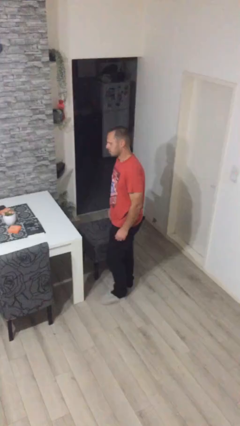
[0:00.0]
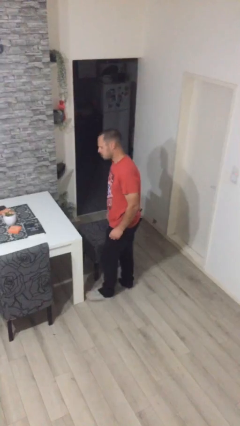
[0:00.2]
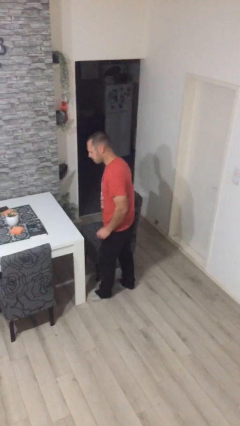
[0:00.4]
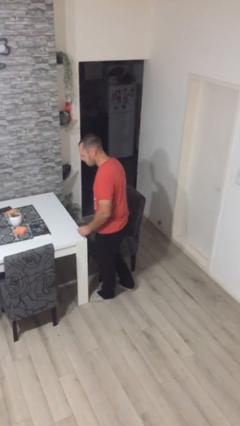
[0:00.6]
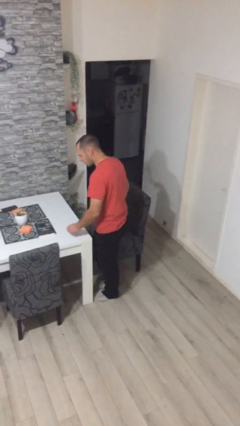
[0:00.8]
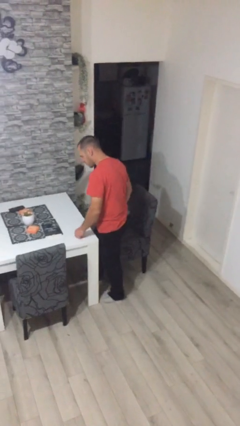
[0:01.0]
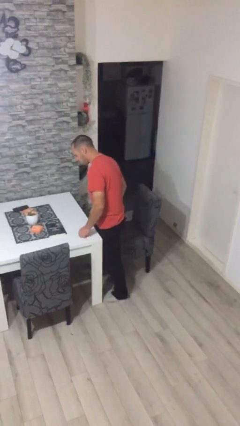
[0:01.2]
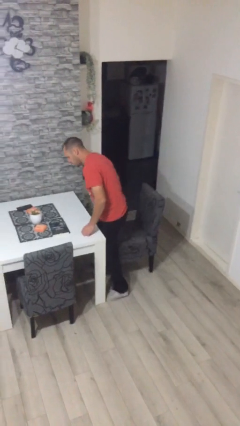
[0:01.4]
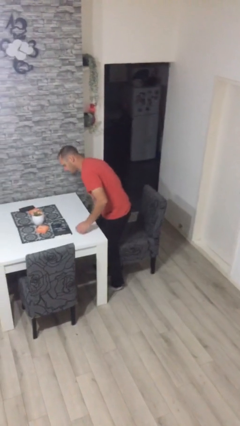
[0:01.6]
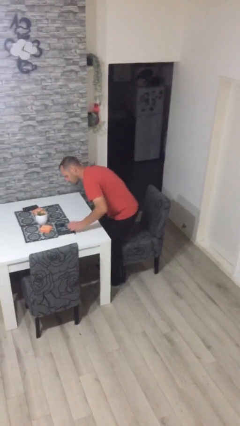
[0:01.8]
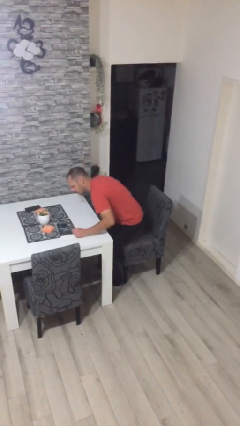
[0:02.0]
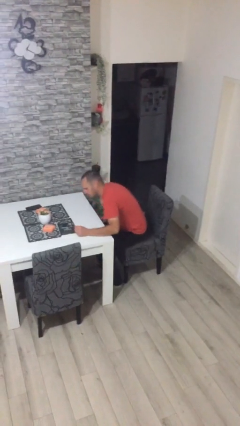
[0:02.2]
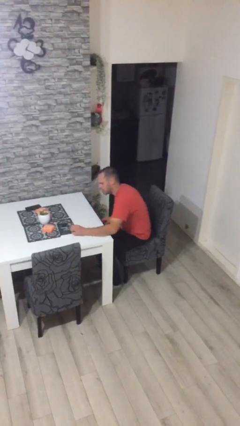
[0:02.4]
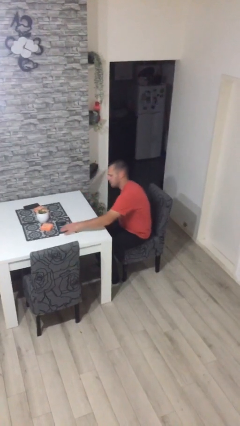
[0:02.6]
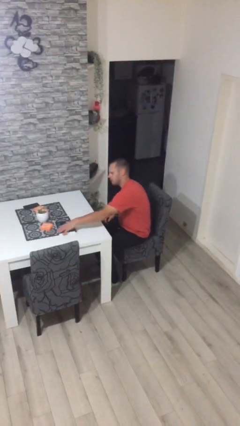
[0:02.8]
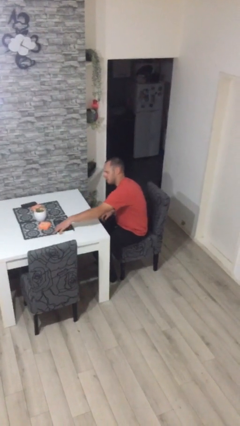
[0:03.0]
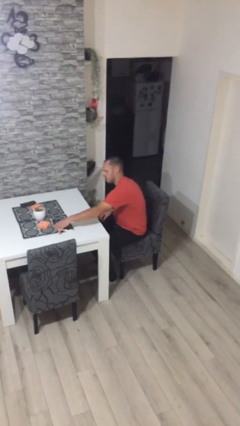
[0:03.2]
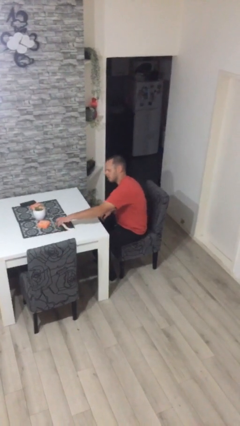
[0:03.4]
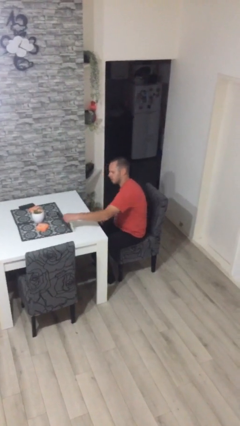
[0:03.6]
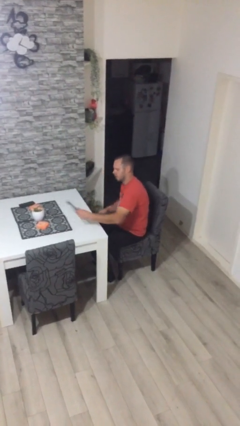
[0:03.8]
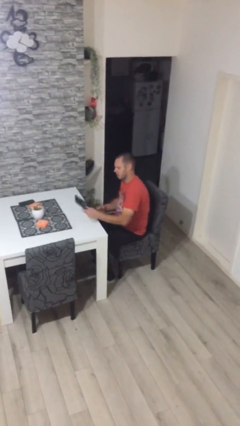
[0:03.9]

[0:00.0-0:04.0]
person sits down

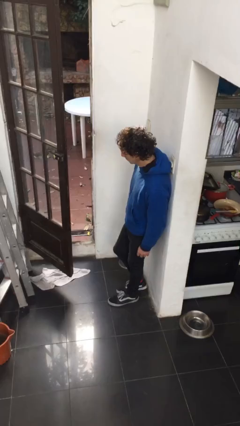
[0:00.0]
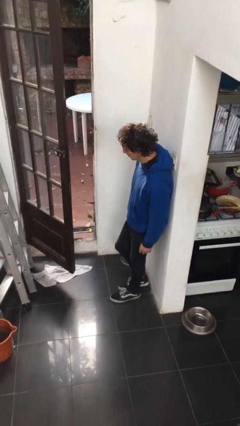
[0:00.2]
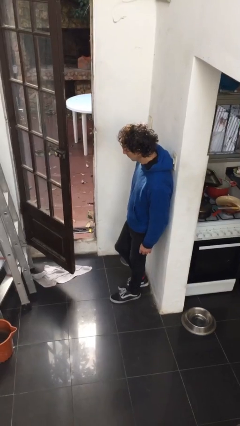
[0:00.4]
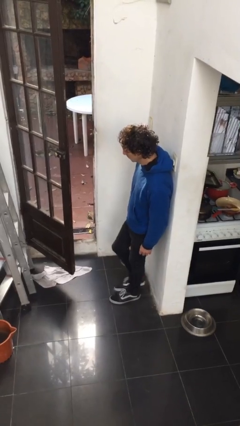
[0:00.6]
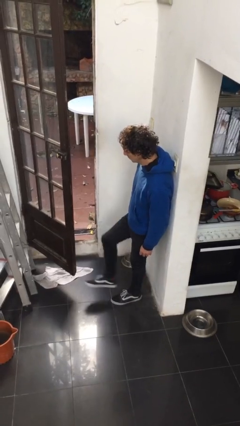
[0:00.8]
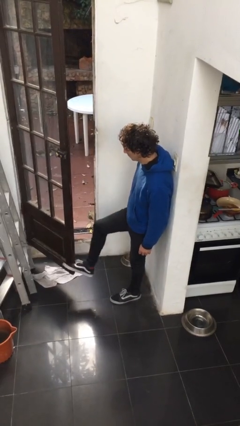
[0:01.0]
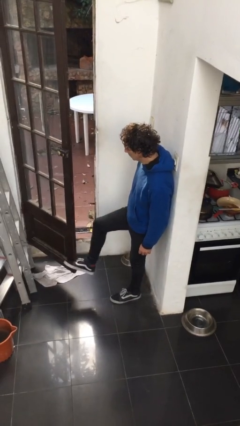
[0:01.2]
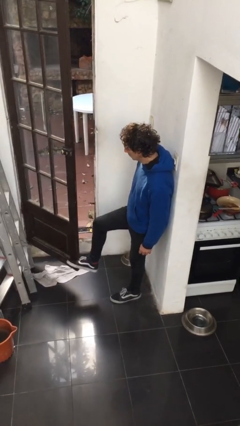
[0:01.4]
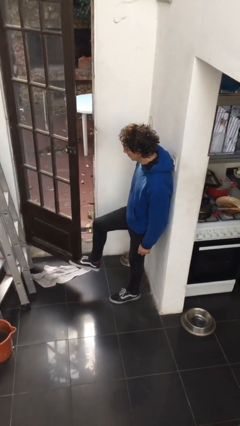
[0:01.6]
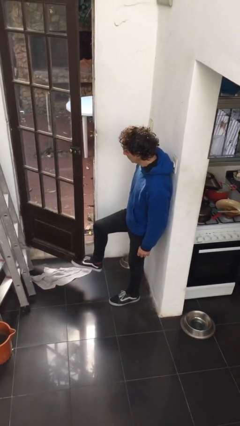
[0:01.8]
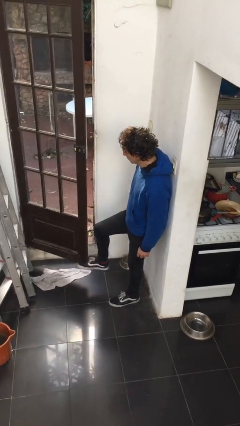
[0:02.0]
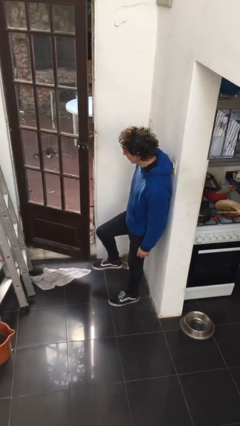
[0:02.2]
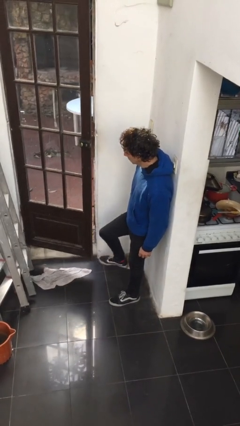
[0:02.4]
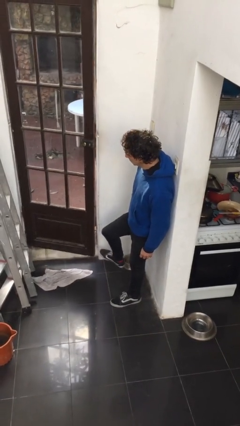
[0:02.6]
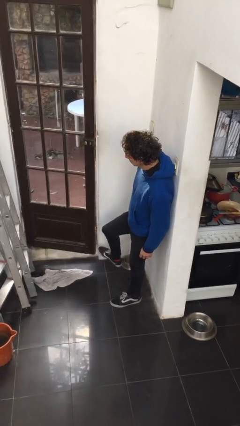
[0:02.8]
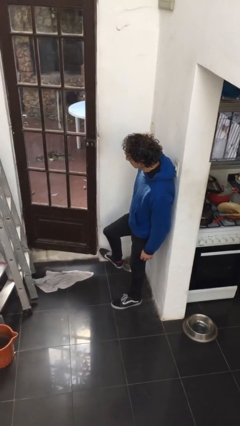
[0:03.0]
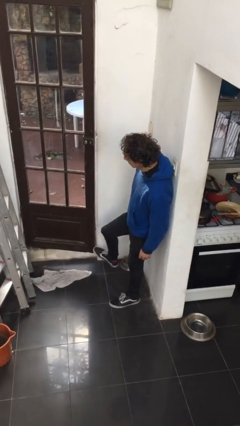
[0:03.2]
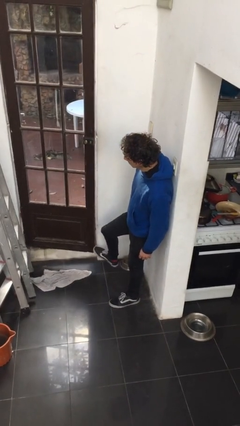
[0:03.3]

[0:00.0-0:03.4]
person closes door with foot

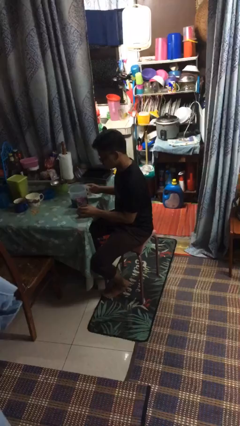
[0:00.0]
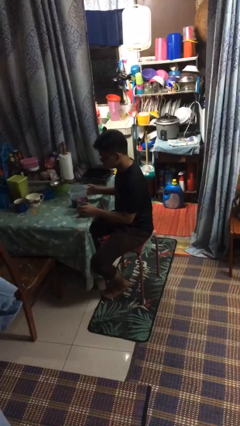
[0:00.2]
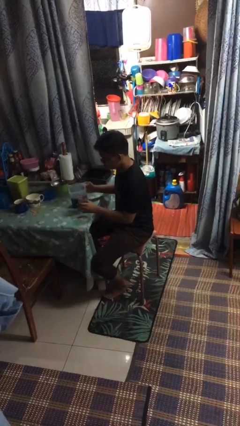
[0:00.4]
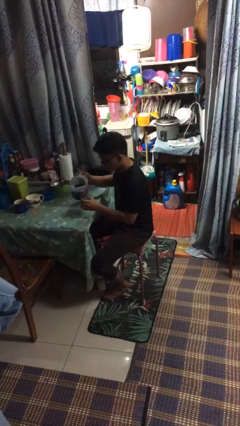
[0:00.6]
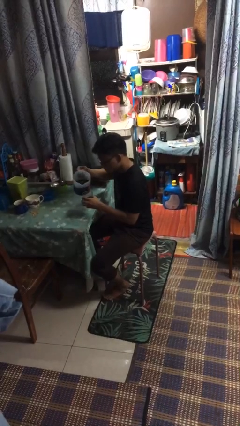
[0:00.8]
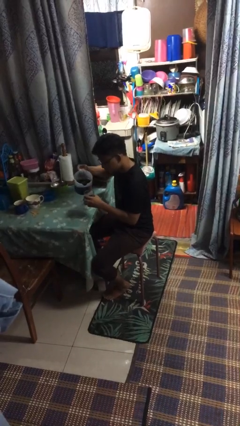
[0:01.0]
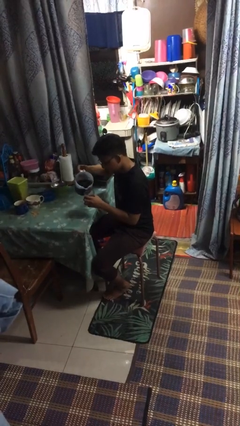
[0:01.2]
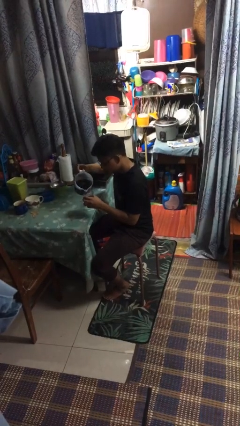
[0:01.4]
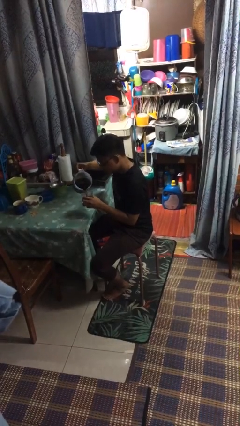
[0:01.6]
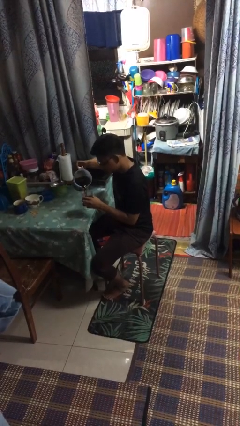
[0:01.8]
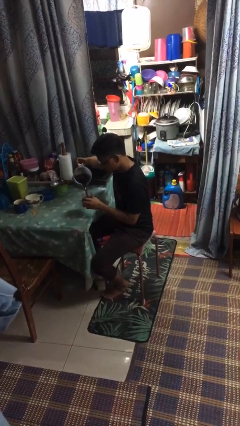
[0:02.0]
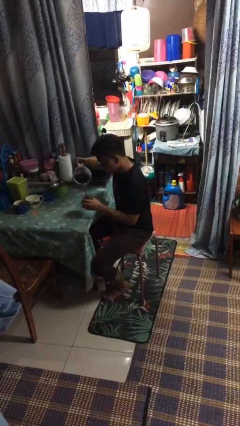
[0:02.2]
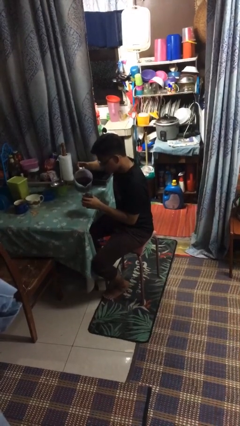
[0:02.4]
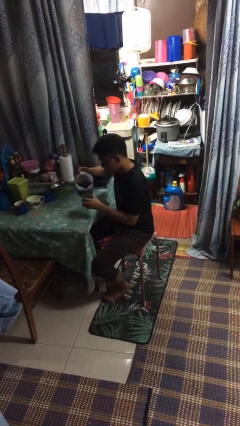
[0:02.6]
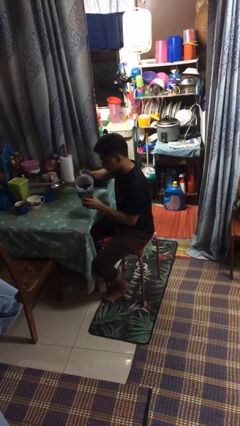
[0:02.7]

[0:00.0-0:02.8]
person pours coffee into mug

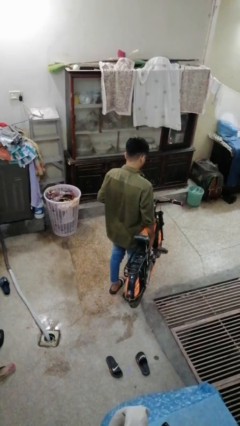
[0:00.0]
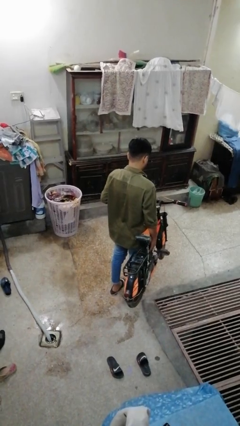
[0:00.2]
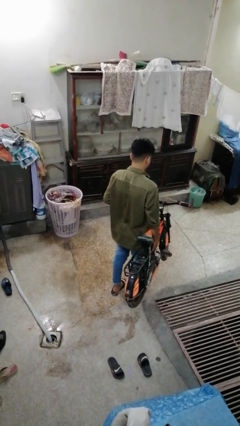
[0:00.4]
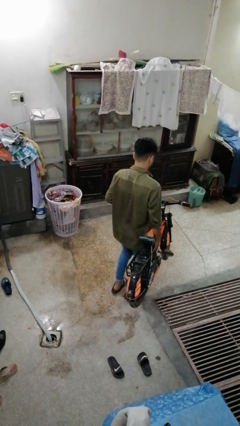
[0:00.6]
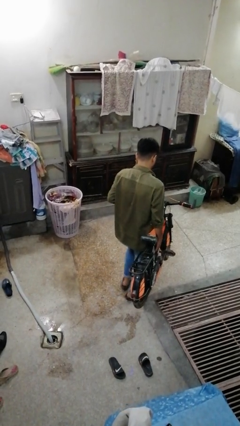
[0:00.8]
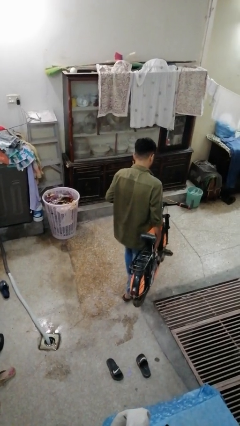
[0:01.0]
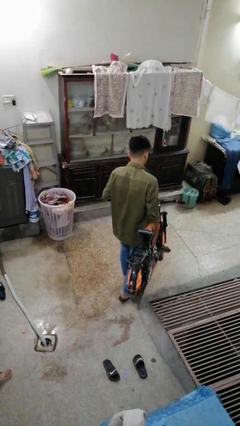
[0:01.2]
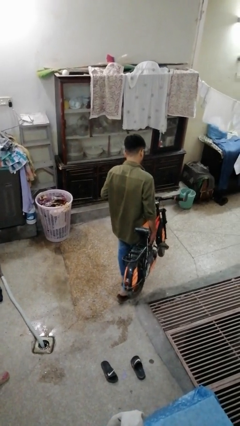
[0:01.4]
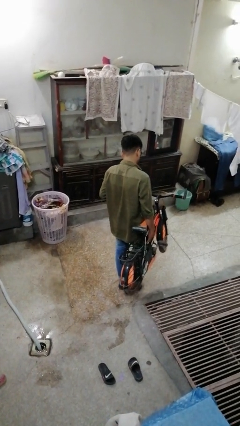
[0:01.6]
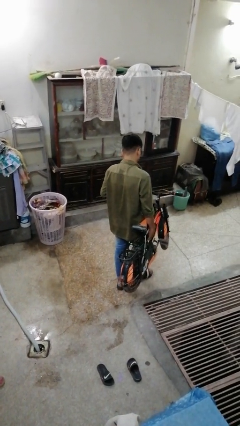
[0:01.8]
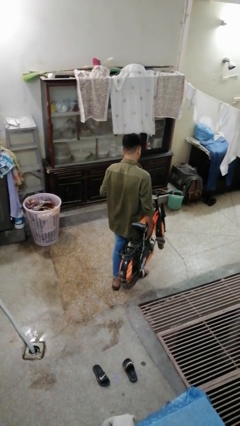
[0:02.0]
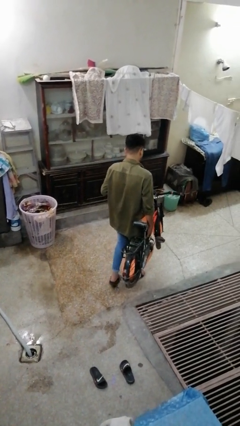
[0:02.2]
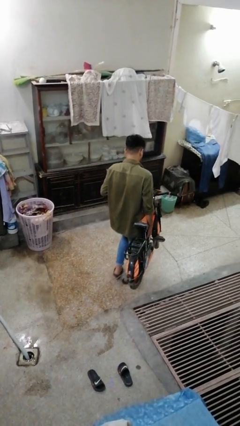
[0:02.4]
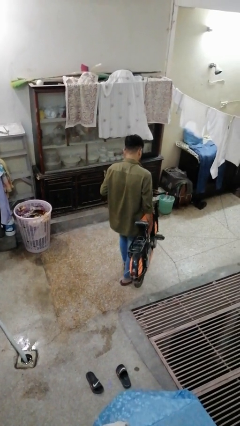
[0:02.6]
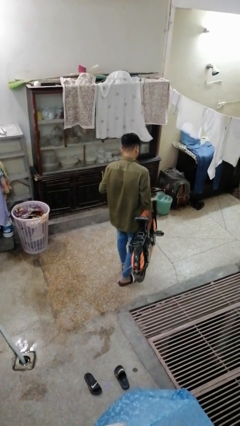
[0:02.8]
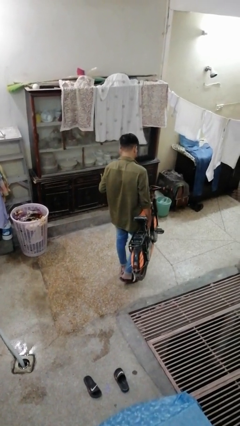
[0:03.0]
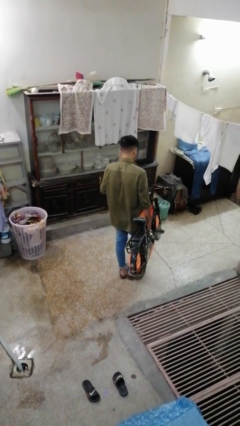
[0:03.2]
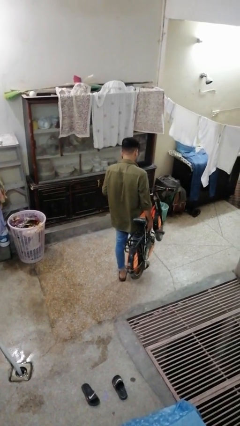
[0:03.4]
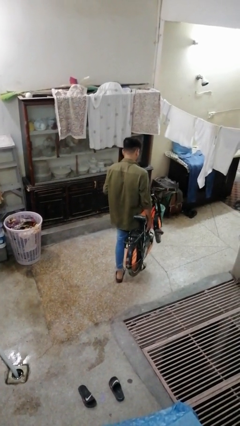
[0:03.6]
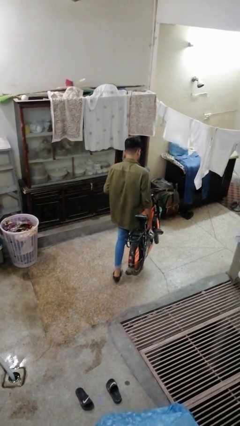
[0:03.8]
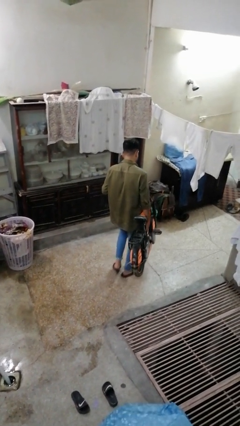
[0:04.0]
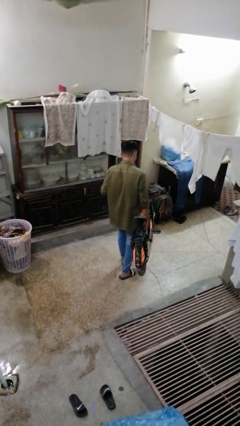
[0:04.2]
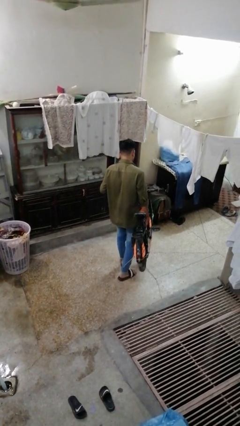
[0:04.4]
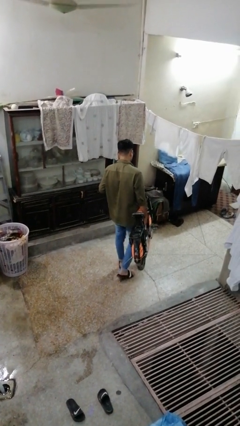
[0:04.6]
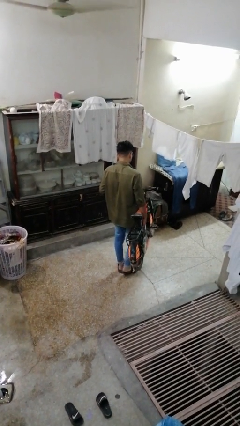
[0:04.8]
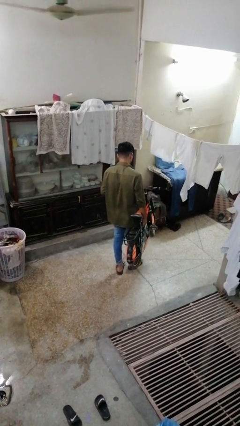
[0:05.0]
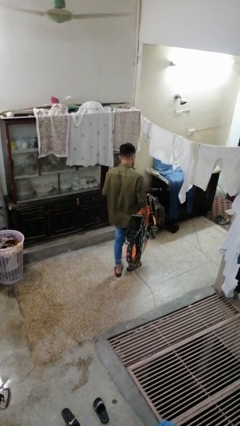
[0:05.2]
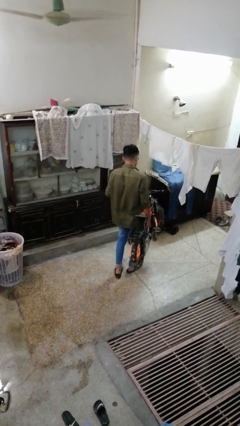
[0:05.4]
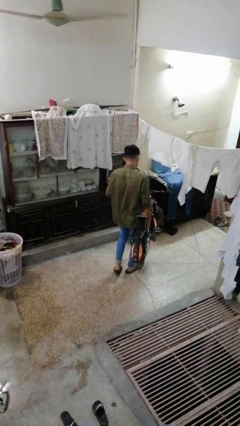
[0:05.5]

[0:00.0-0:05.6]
person carries bicycle

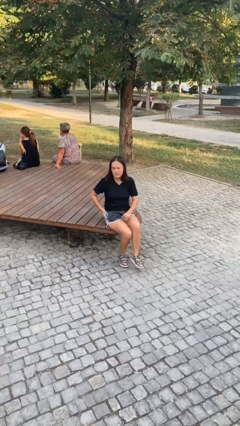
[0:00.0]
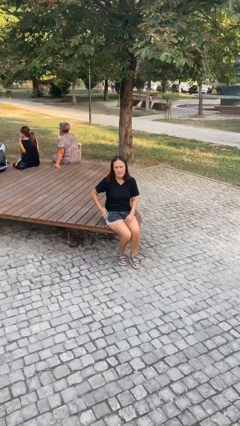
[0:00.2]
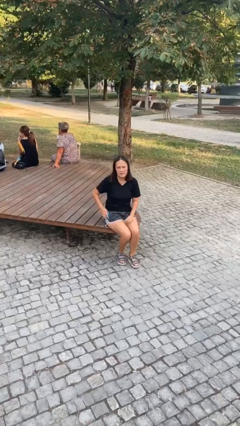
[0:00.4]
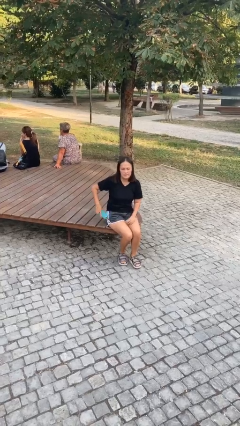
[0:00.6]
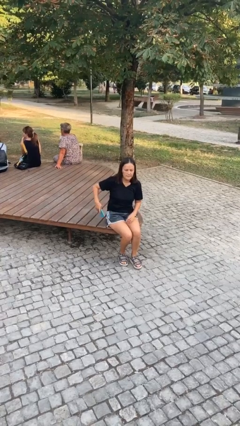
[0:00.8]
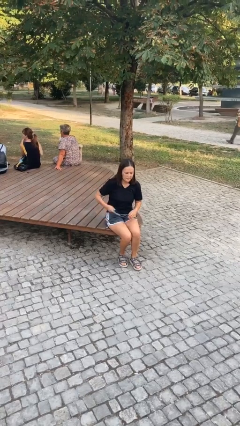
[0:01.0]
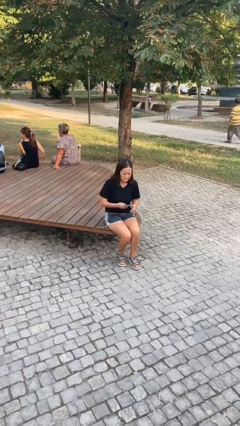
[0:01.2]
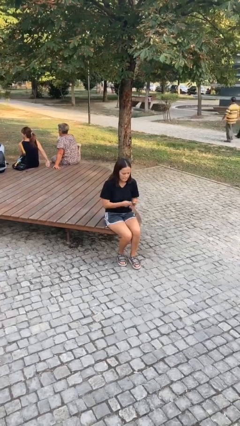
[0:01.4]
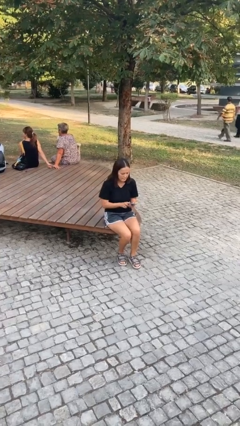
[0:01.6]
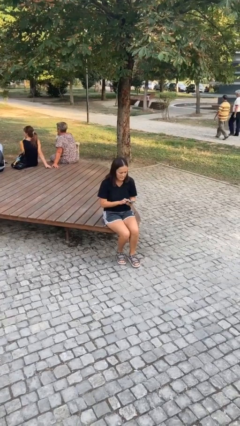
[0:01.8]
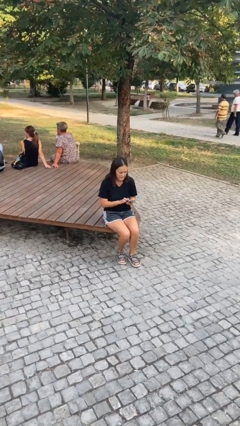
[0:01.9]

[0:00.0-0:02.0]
person takes phone from pocket

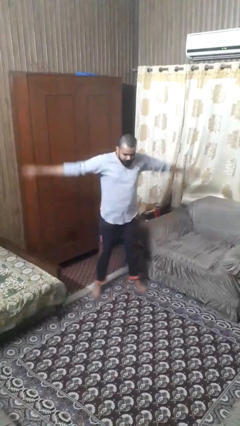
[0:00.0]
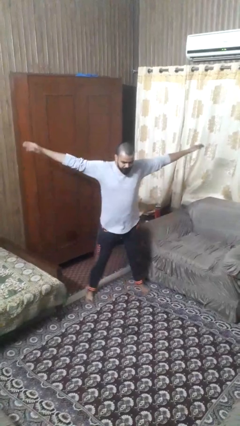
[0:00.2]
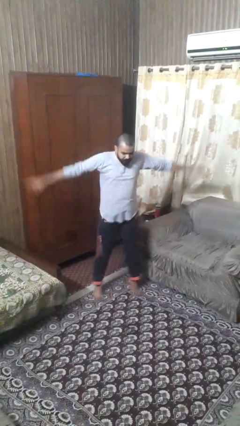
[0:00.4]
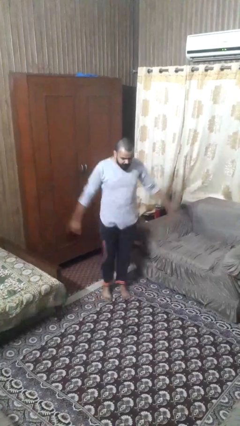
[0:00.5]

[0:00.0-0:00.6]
person exercises with jumping jacks
